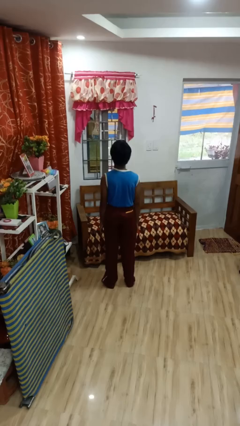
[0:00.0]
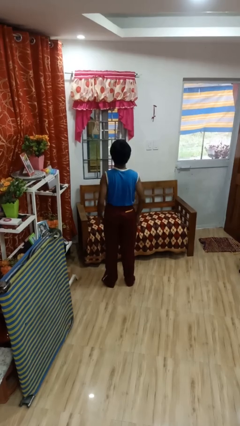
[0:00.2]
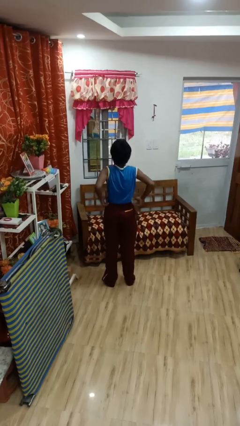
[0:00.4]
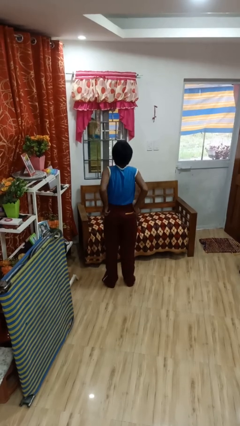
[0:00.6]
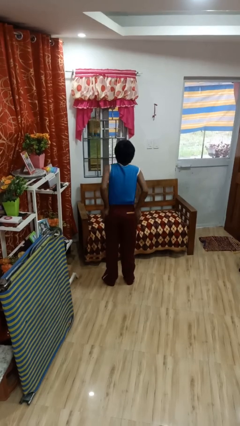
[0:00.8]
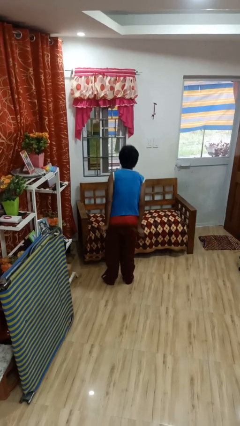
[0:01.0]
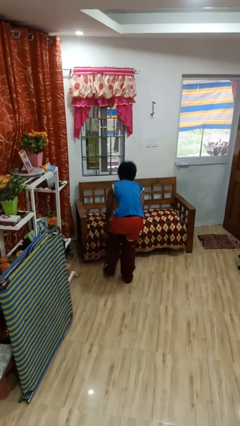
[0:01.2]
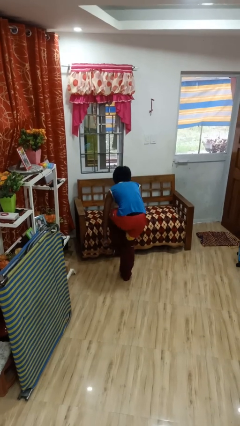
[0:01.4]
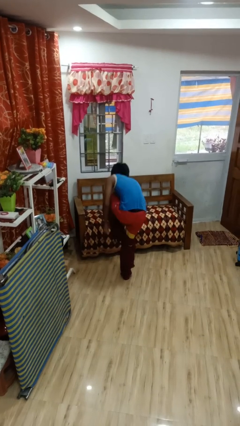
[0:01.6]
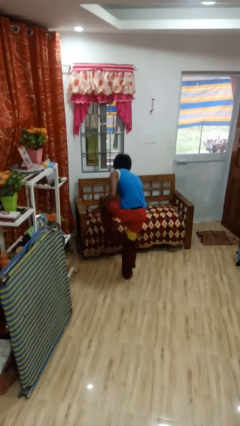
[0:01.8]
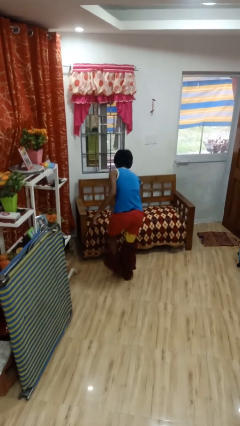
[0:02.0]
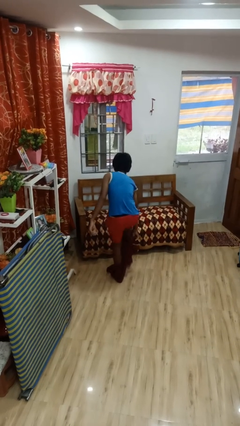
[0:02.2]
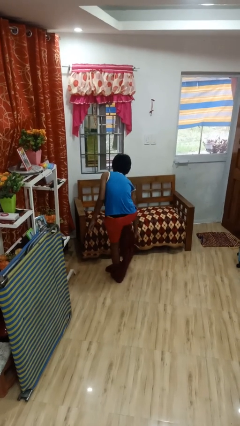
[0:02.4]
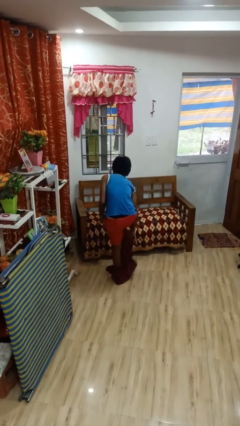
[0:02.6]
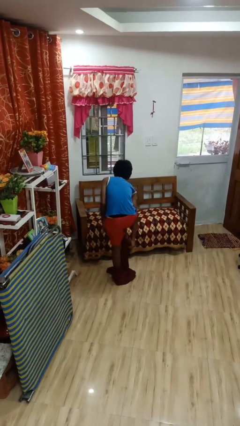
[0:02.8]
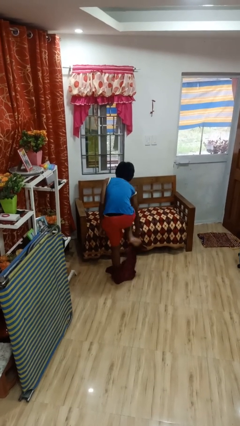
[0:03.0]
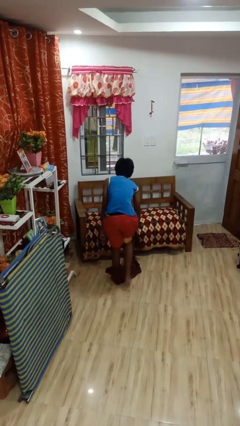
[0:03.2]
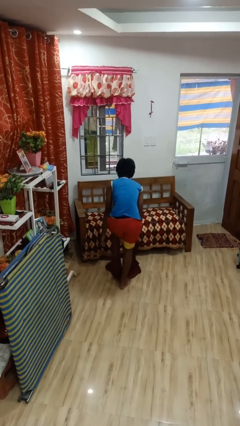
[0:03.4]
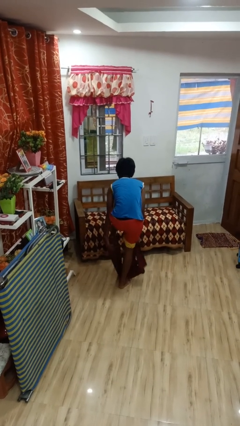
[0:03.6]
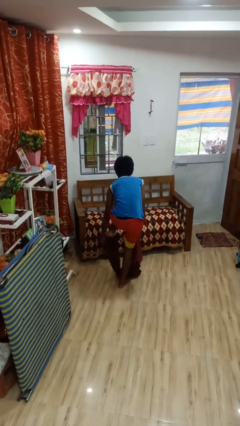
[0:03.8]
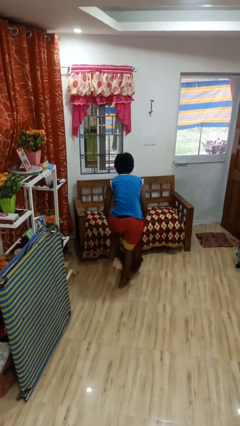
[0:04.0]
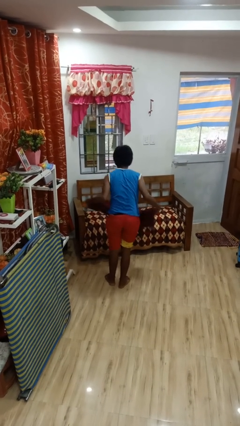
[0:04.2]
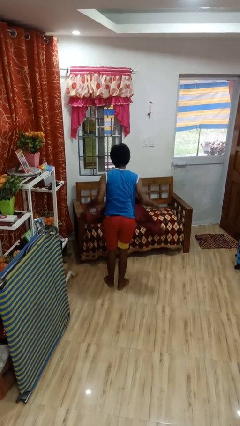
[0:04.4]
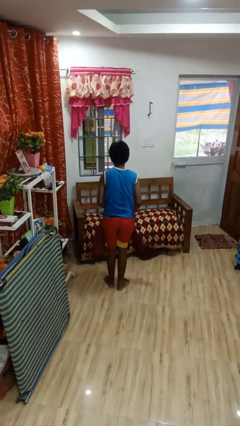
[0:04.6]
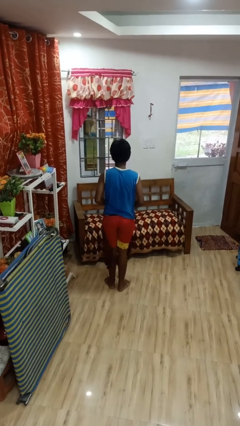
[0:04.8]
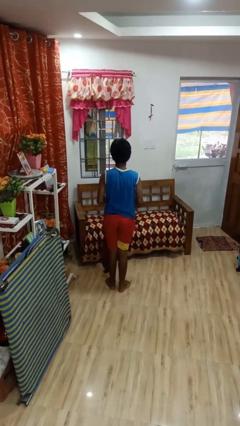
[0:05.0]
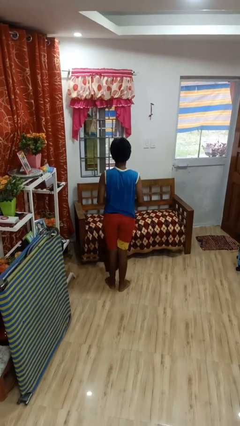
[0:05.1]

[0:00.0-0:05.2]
person takes off pants

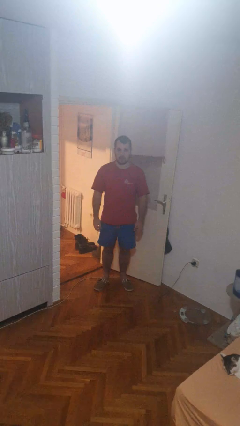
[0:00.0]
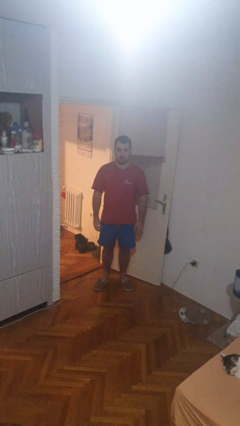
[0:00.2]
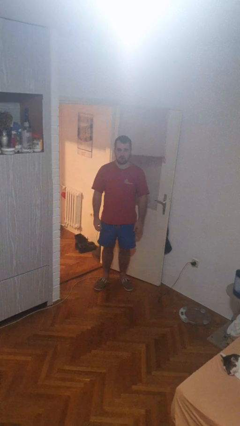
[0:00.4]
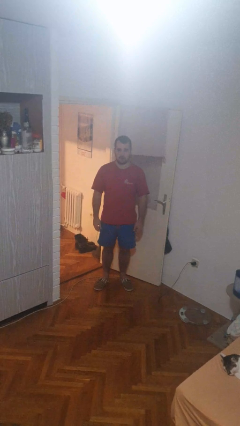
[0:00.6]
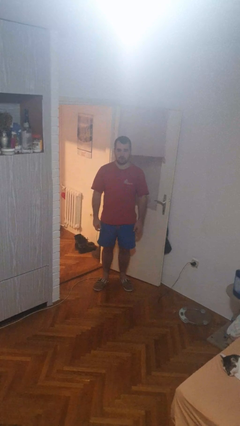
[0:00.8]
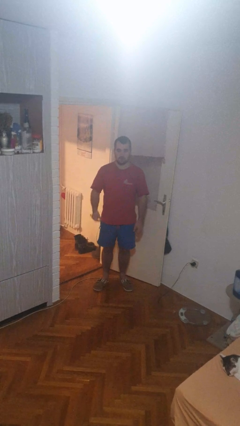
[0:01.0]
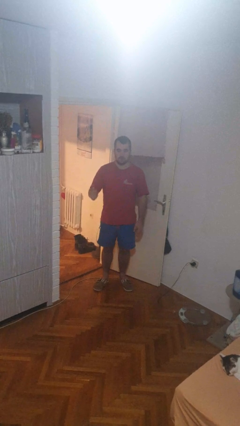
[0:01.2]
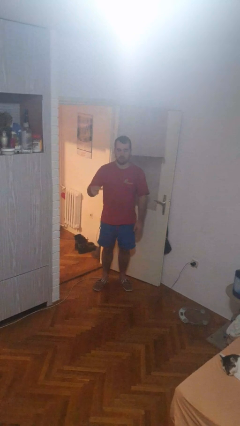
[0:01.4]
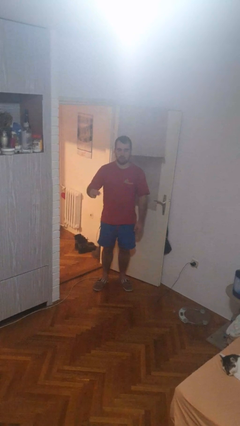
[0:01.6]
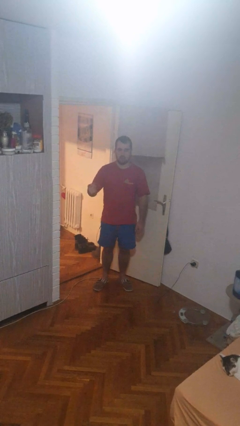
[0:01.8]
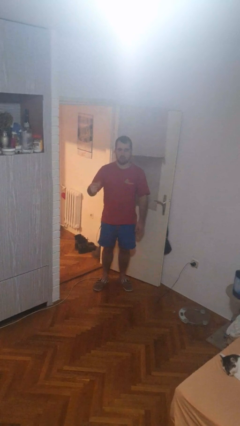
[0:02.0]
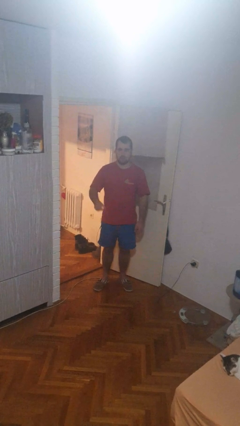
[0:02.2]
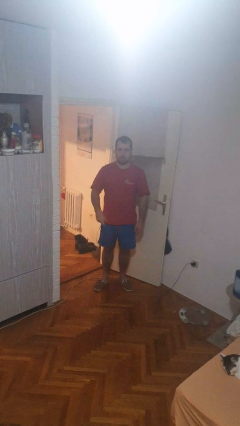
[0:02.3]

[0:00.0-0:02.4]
person snaps fingers

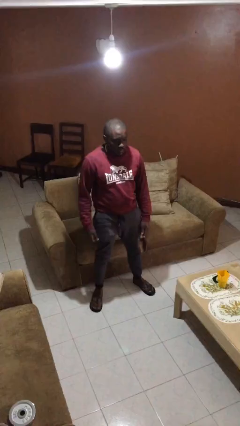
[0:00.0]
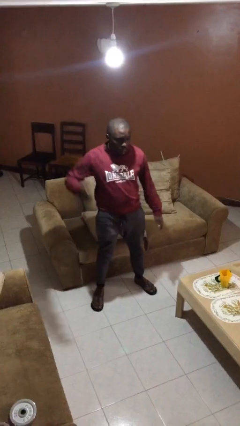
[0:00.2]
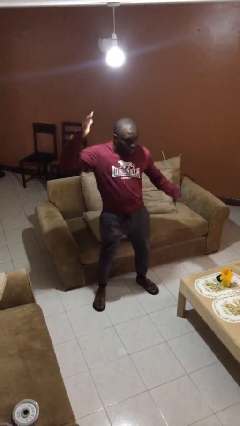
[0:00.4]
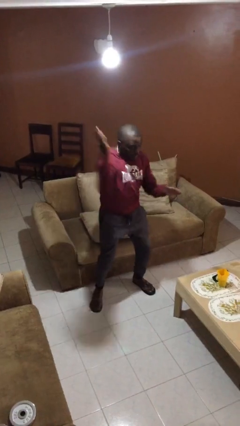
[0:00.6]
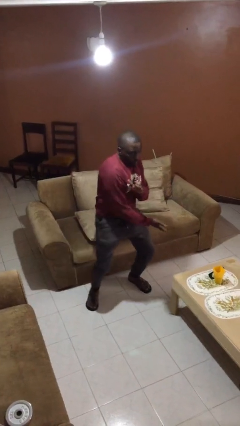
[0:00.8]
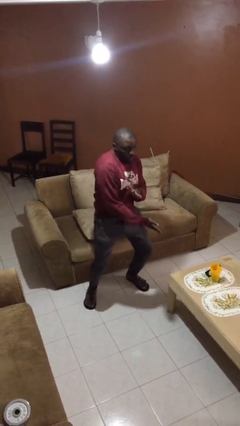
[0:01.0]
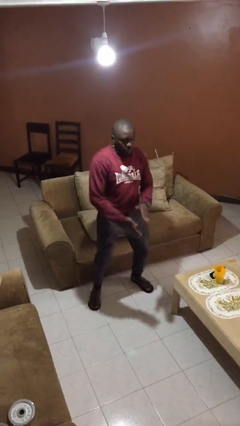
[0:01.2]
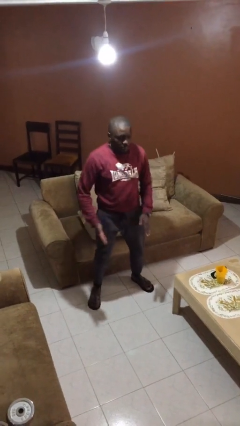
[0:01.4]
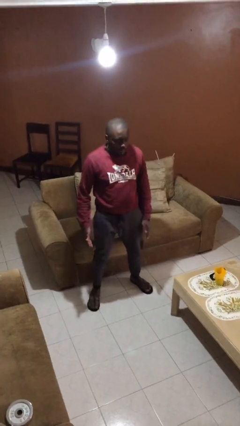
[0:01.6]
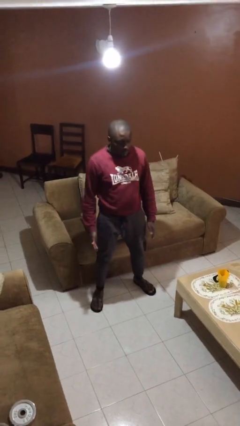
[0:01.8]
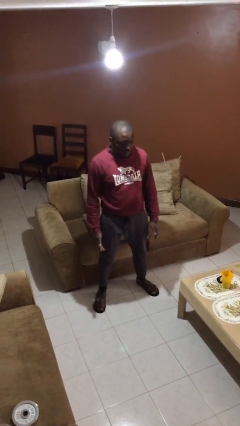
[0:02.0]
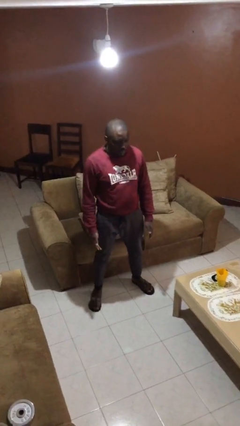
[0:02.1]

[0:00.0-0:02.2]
person karate chop

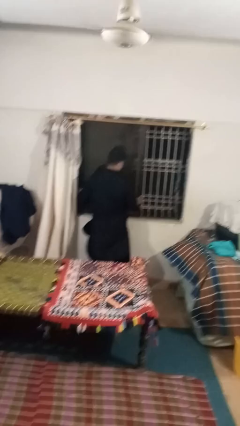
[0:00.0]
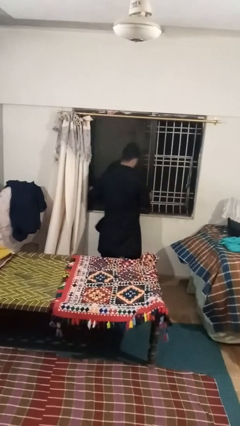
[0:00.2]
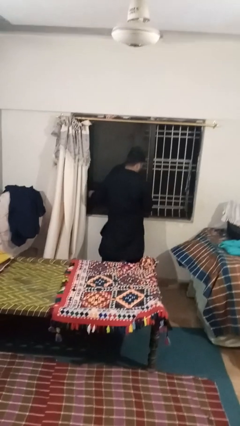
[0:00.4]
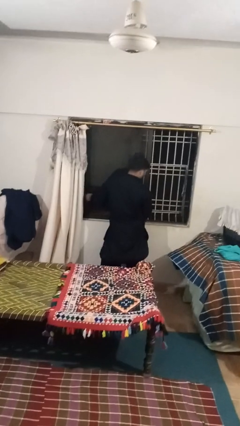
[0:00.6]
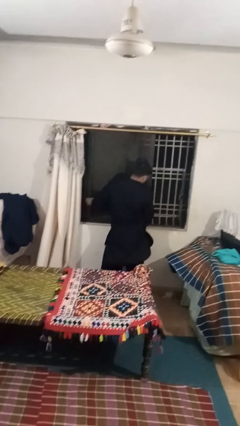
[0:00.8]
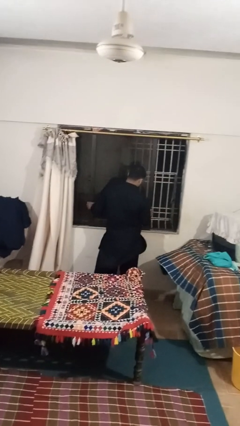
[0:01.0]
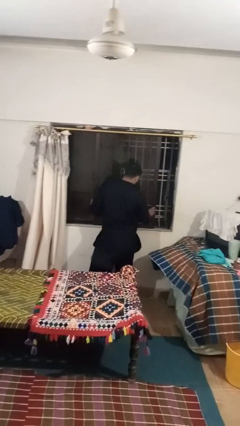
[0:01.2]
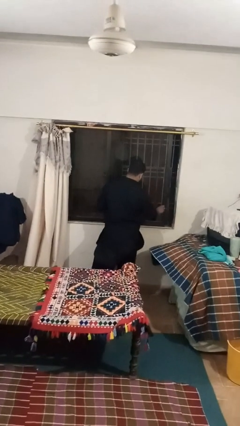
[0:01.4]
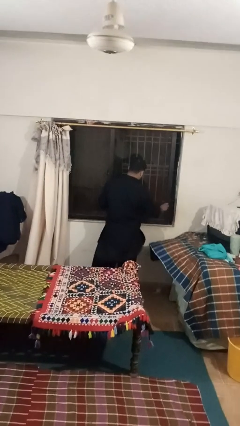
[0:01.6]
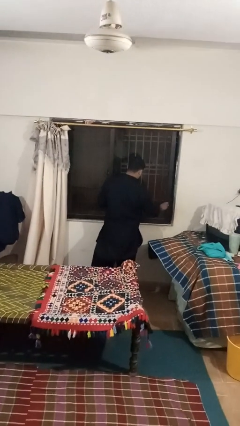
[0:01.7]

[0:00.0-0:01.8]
person closes sliding door

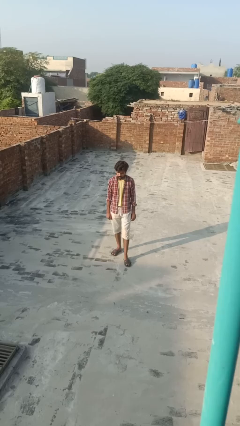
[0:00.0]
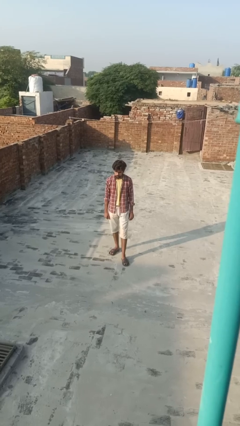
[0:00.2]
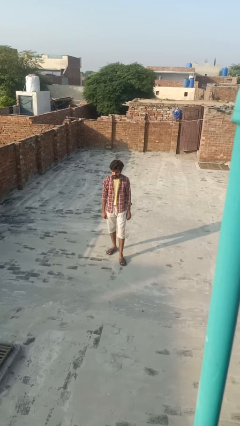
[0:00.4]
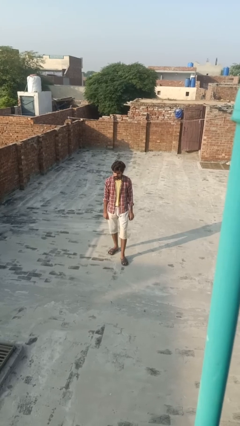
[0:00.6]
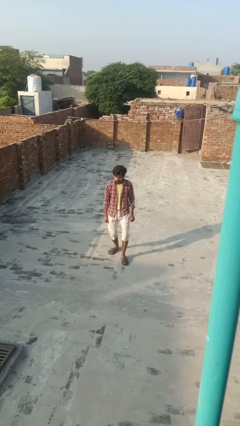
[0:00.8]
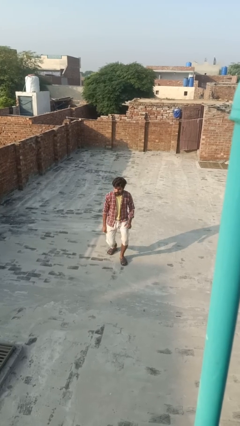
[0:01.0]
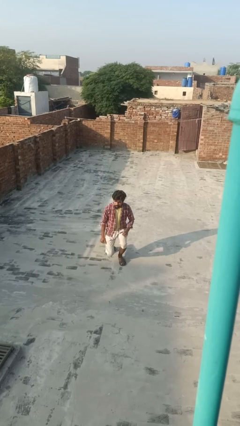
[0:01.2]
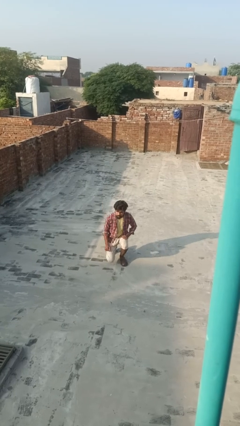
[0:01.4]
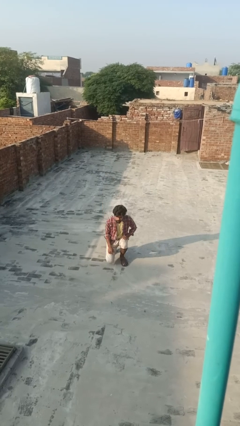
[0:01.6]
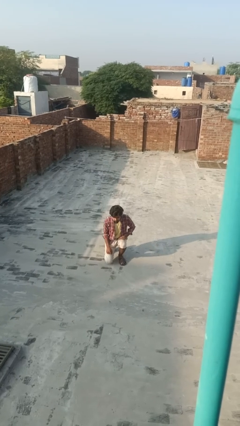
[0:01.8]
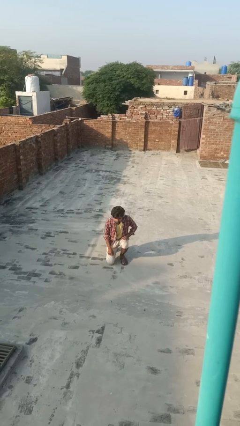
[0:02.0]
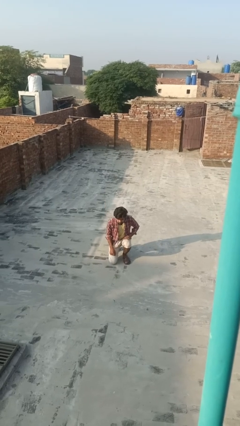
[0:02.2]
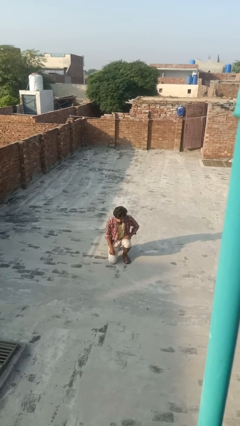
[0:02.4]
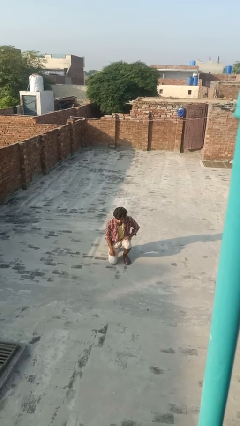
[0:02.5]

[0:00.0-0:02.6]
person squats

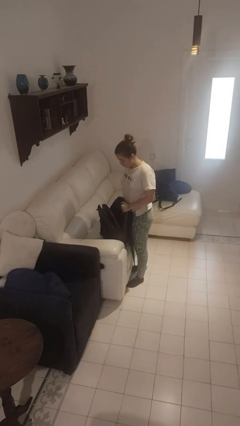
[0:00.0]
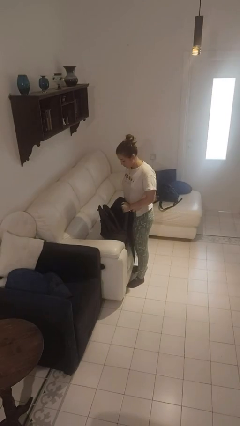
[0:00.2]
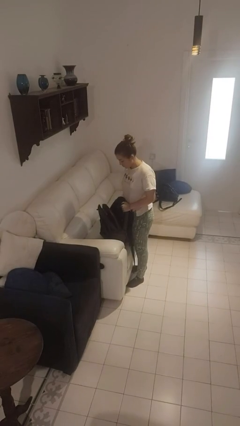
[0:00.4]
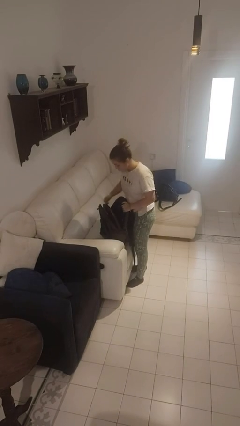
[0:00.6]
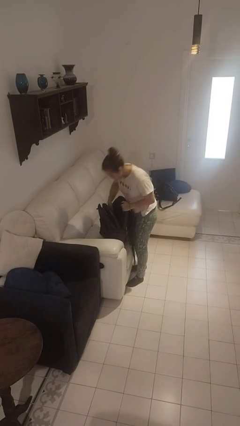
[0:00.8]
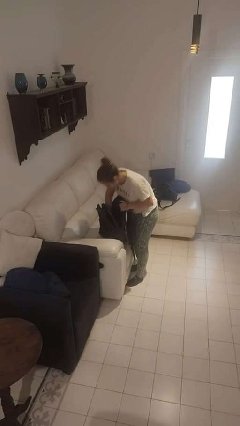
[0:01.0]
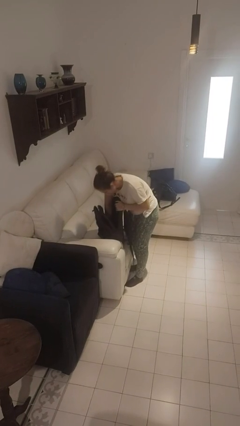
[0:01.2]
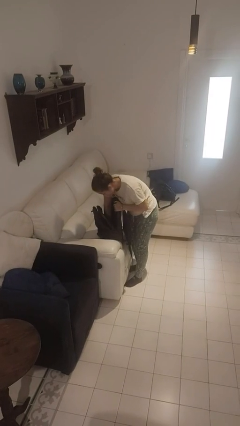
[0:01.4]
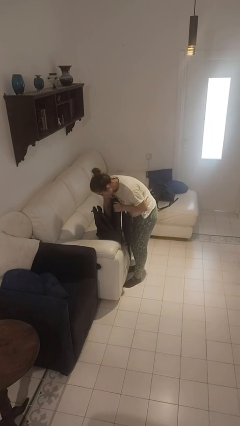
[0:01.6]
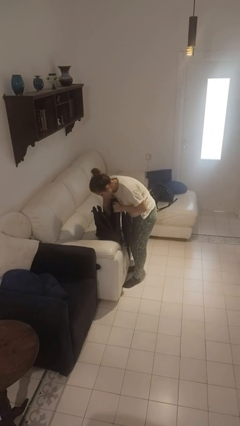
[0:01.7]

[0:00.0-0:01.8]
person searches in backpack

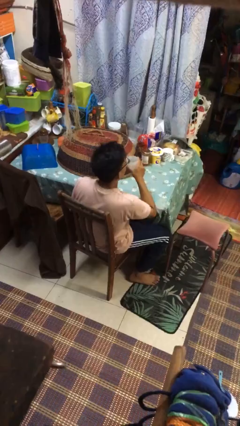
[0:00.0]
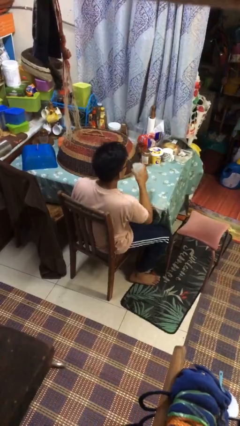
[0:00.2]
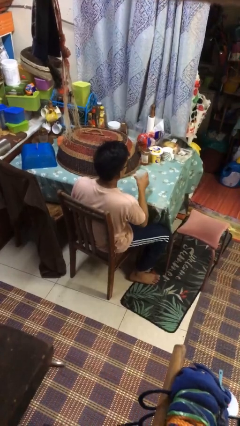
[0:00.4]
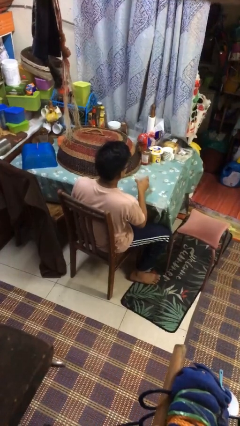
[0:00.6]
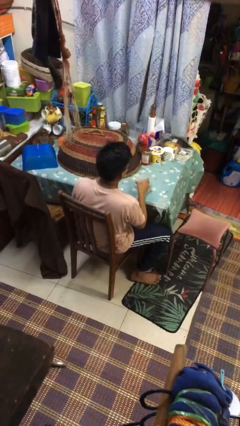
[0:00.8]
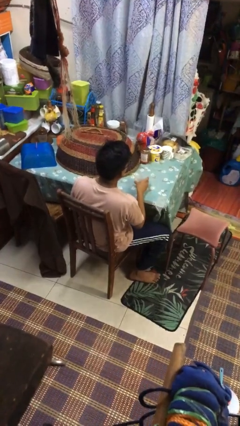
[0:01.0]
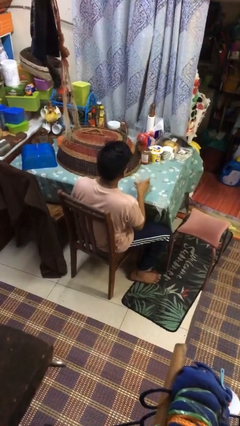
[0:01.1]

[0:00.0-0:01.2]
person puts down object on table
